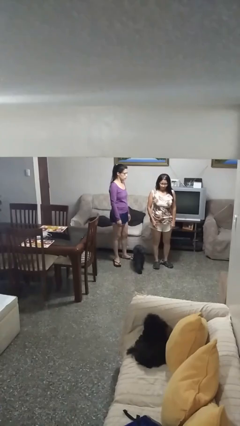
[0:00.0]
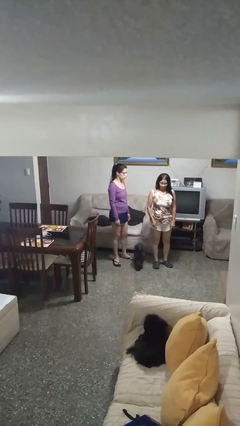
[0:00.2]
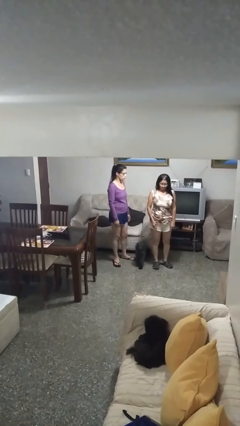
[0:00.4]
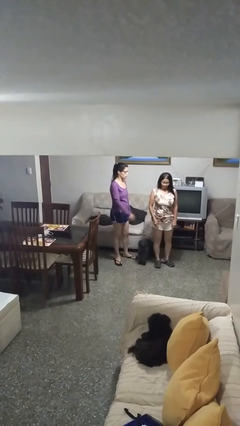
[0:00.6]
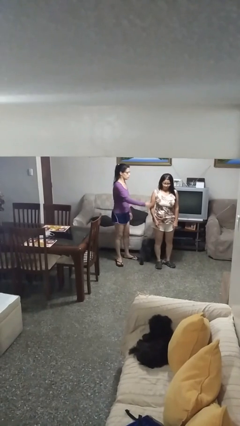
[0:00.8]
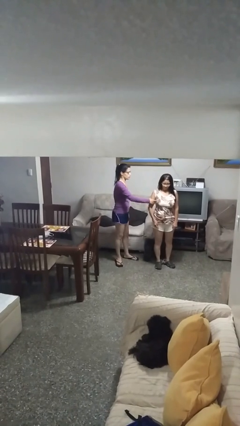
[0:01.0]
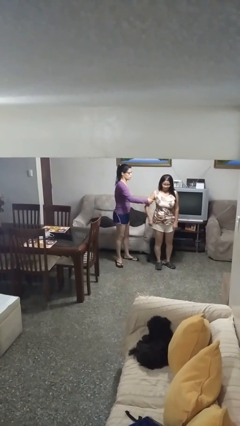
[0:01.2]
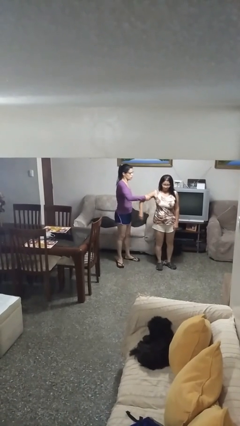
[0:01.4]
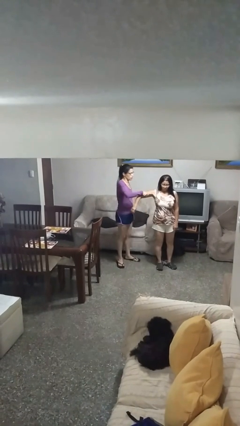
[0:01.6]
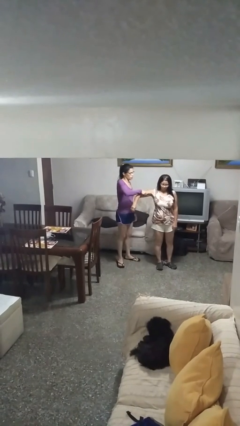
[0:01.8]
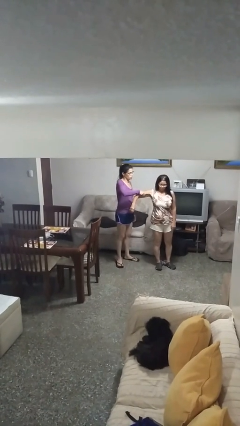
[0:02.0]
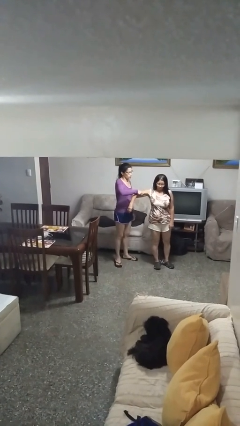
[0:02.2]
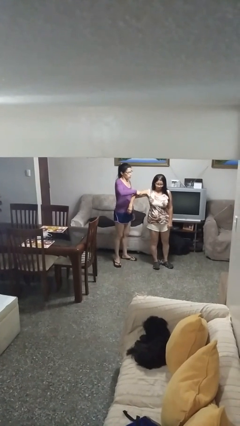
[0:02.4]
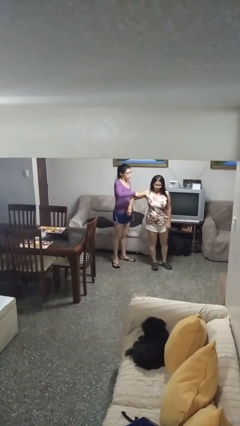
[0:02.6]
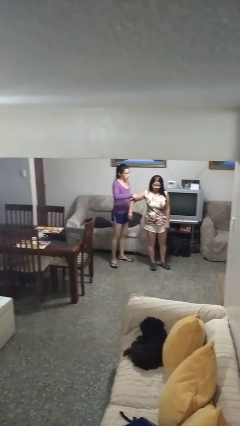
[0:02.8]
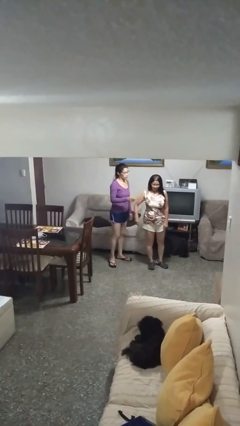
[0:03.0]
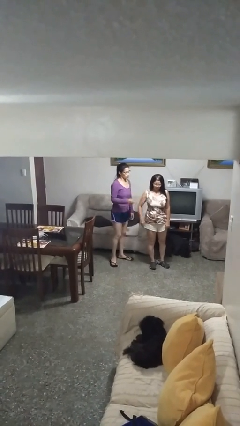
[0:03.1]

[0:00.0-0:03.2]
person grabs person by bicep

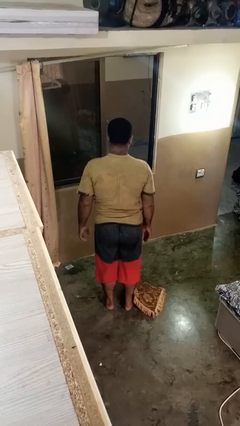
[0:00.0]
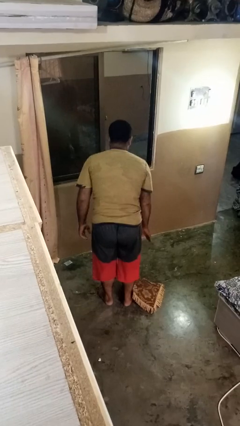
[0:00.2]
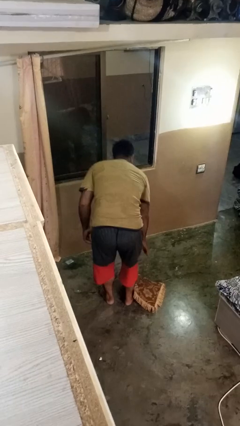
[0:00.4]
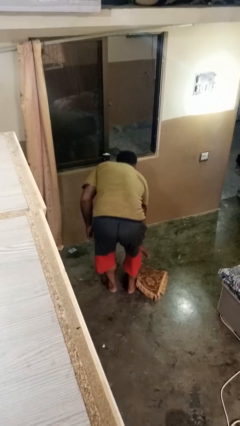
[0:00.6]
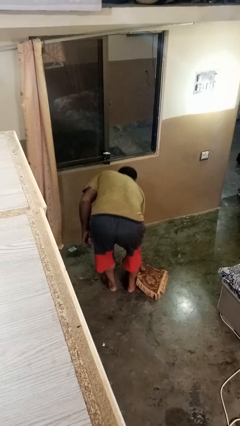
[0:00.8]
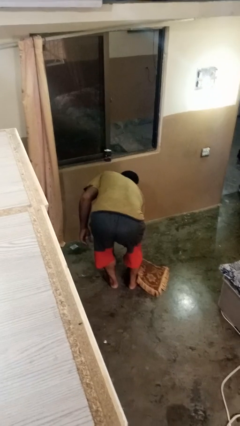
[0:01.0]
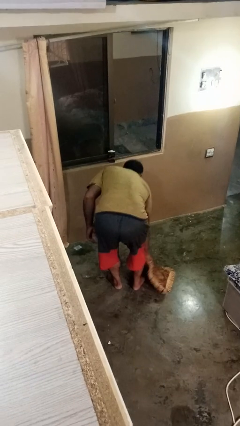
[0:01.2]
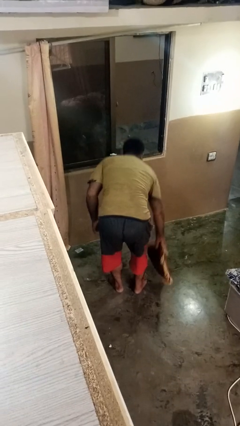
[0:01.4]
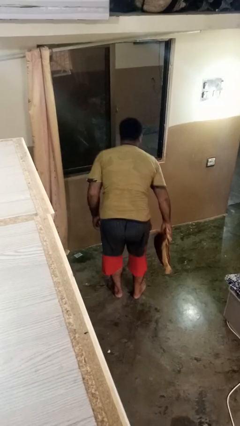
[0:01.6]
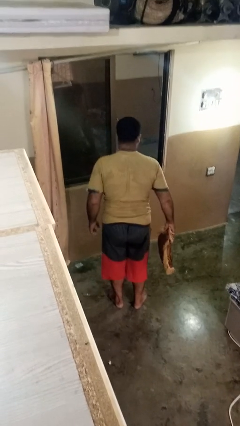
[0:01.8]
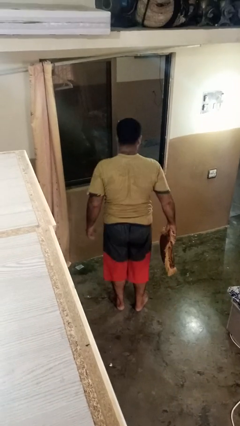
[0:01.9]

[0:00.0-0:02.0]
person picks up object from floor

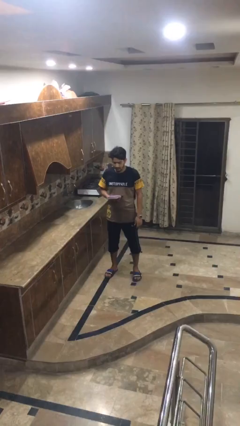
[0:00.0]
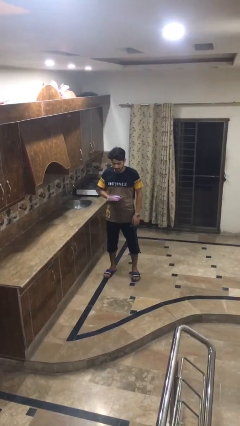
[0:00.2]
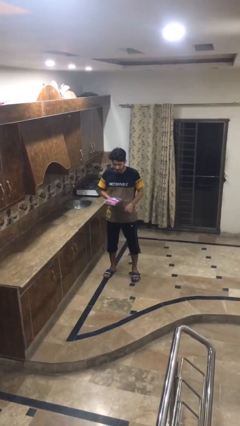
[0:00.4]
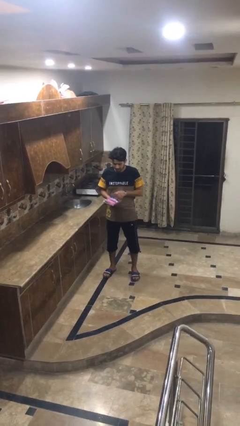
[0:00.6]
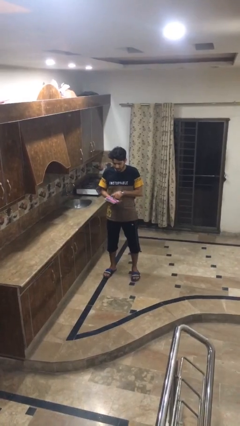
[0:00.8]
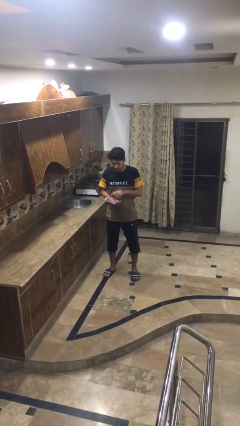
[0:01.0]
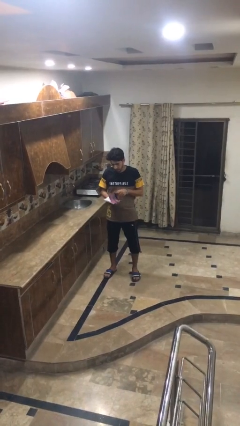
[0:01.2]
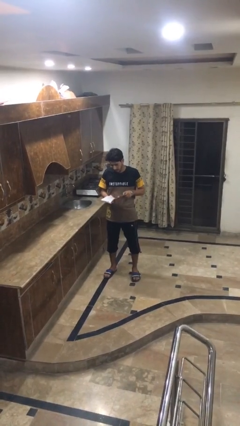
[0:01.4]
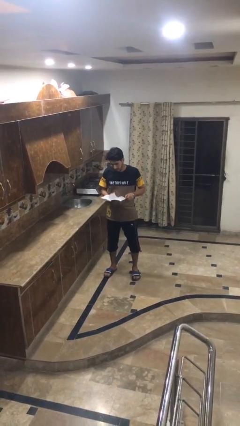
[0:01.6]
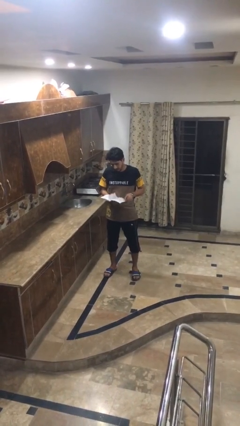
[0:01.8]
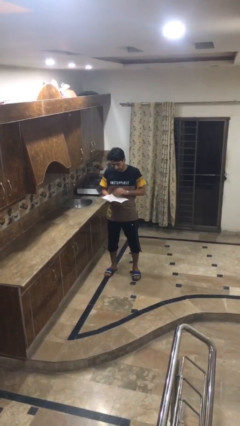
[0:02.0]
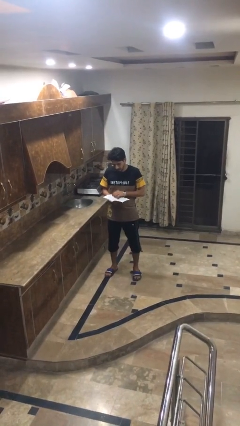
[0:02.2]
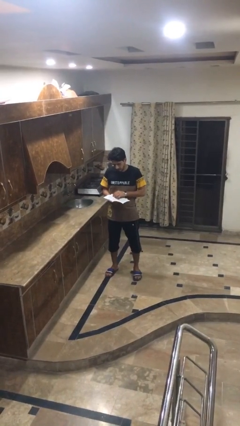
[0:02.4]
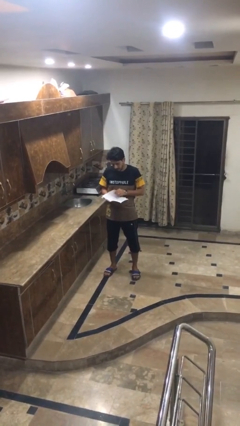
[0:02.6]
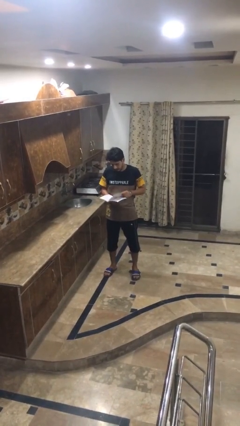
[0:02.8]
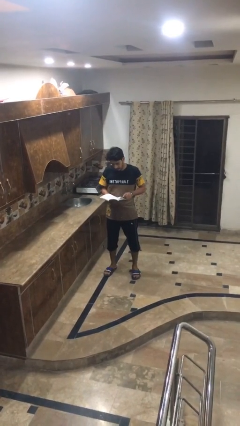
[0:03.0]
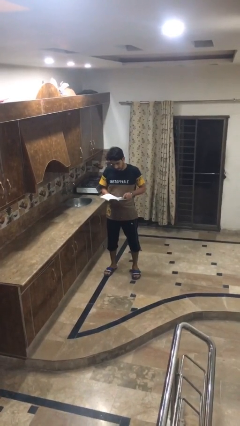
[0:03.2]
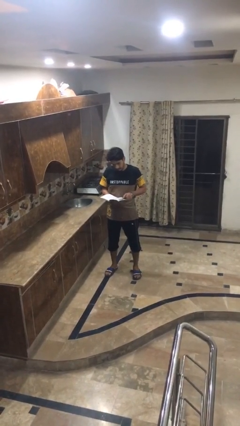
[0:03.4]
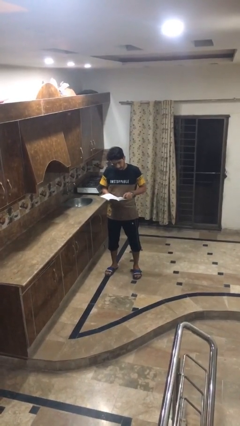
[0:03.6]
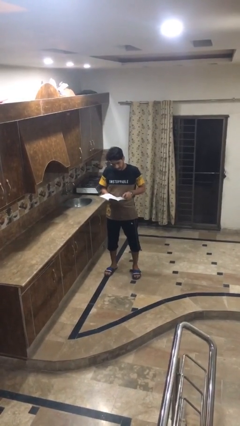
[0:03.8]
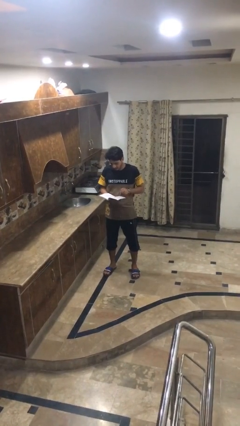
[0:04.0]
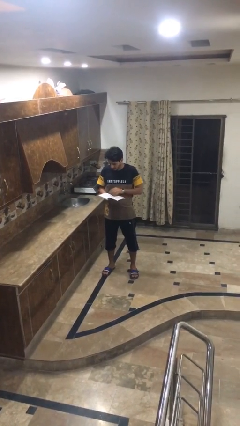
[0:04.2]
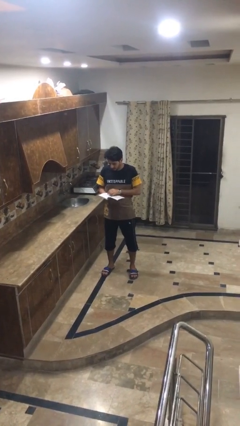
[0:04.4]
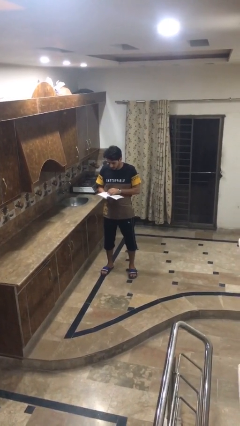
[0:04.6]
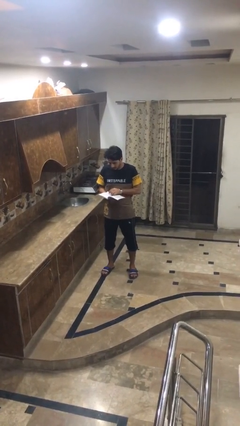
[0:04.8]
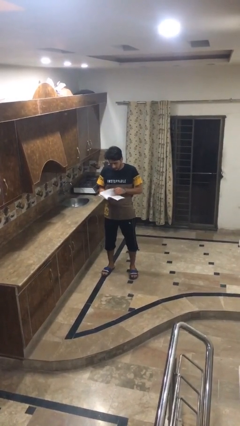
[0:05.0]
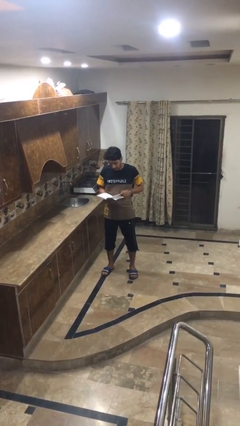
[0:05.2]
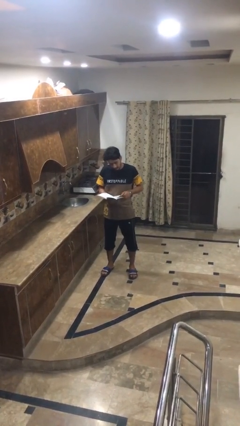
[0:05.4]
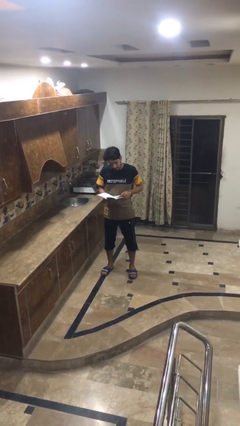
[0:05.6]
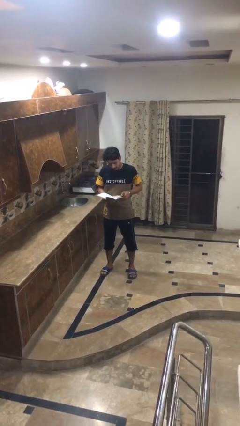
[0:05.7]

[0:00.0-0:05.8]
person reads book

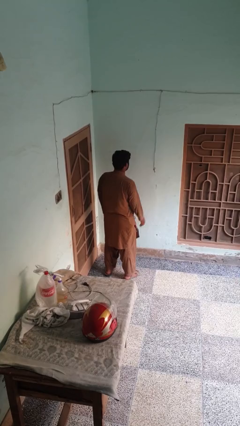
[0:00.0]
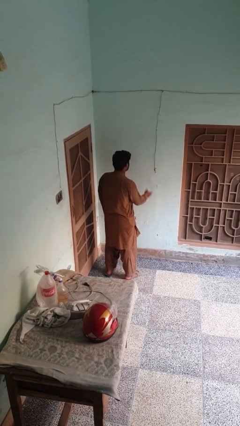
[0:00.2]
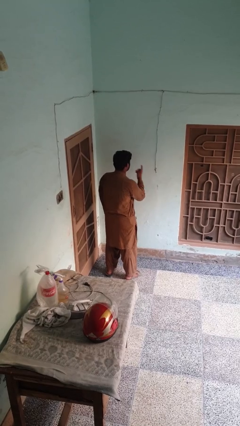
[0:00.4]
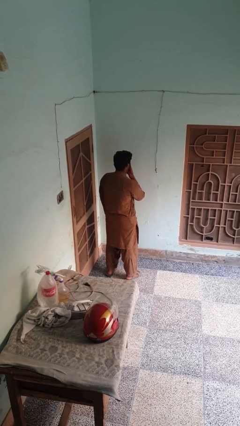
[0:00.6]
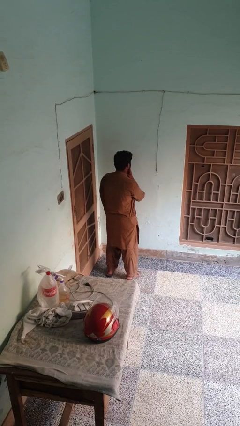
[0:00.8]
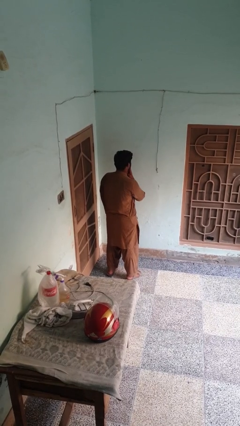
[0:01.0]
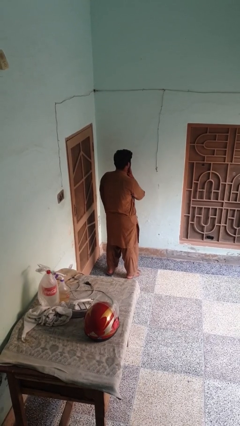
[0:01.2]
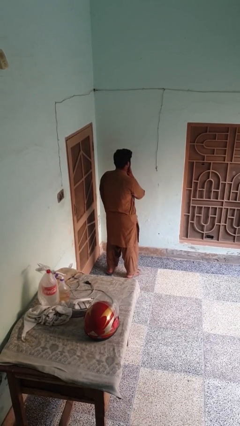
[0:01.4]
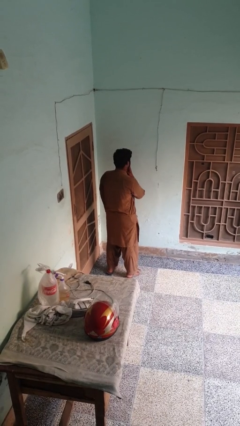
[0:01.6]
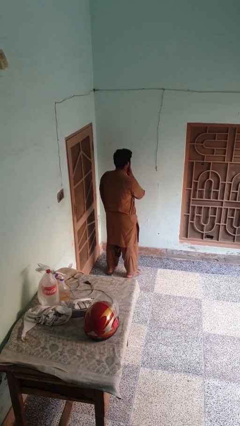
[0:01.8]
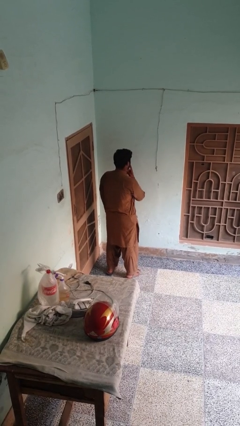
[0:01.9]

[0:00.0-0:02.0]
person gestures be quiet

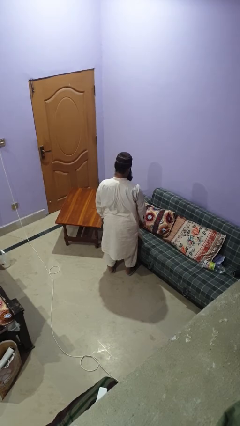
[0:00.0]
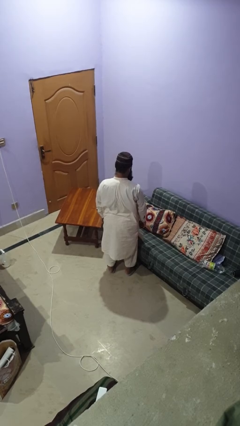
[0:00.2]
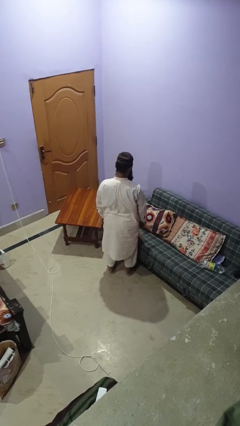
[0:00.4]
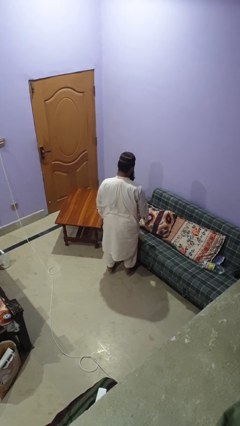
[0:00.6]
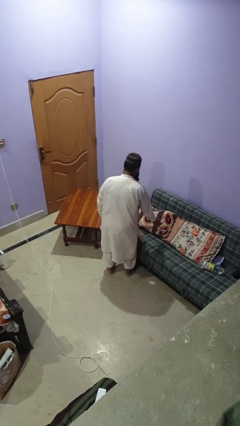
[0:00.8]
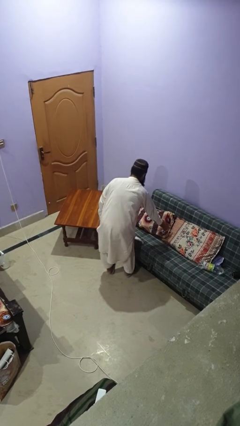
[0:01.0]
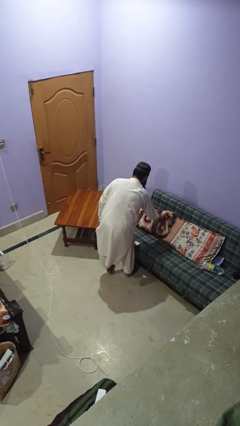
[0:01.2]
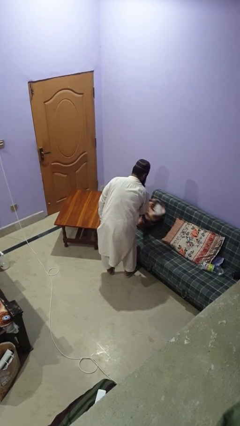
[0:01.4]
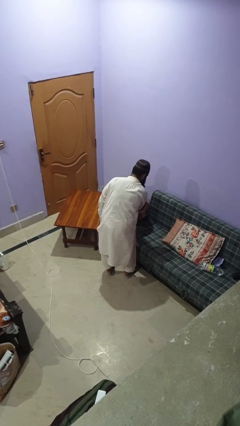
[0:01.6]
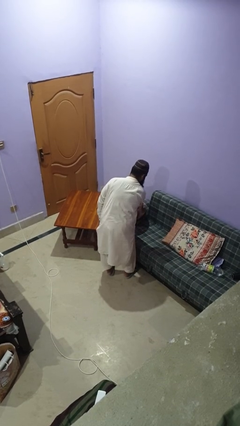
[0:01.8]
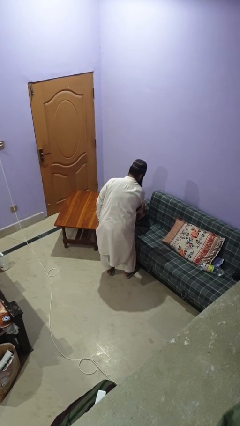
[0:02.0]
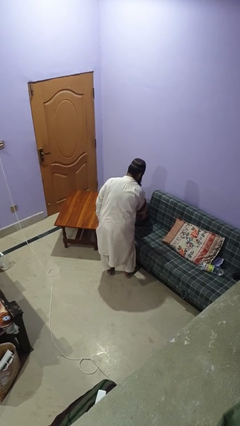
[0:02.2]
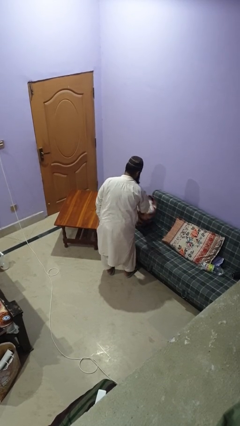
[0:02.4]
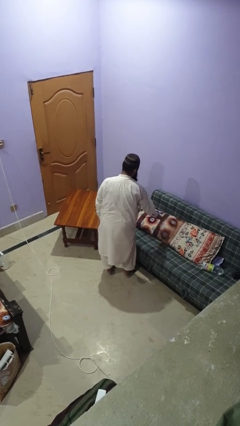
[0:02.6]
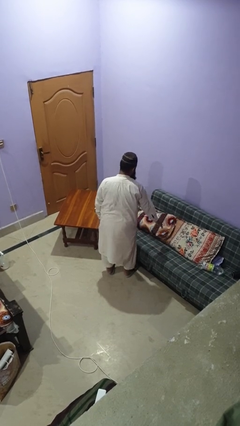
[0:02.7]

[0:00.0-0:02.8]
person searches in couch

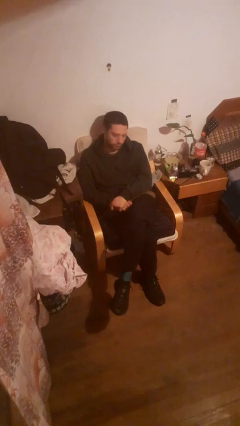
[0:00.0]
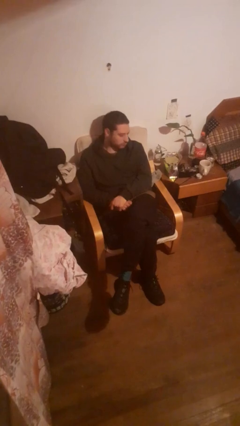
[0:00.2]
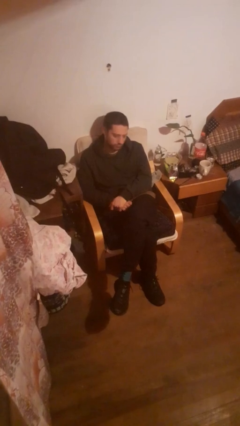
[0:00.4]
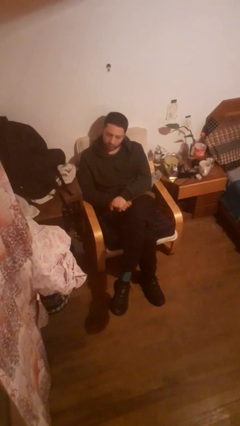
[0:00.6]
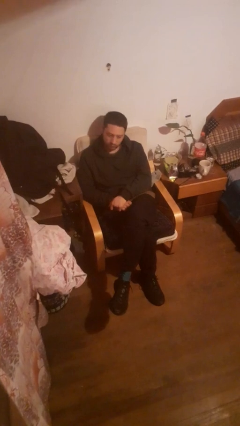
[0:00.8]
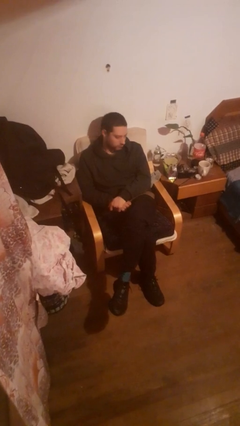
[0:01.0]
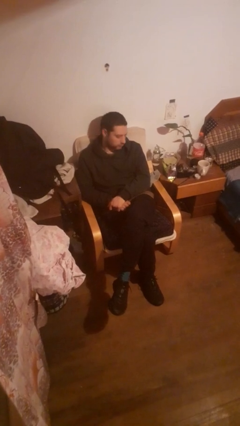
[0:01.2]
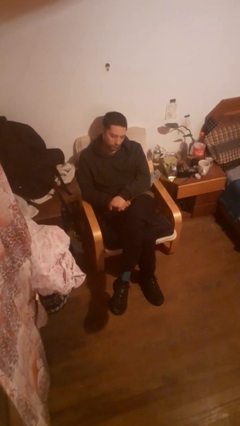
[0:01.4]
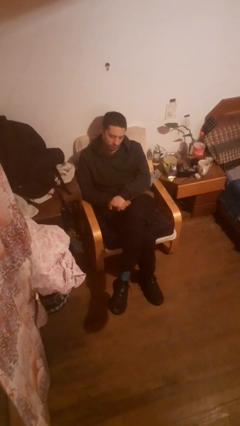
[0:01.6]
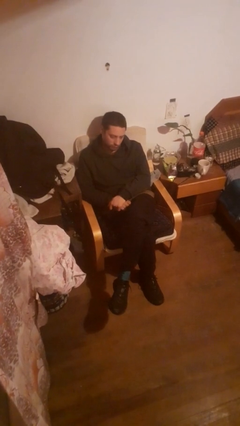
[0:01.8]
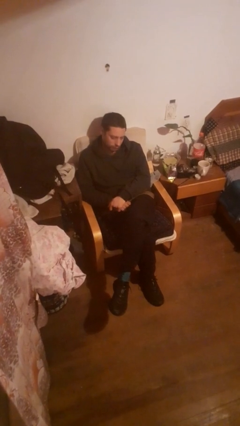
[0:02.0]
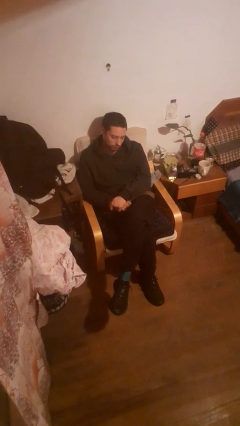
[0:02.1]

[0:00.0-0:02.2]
person shakes head
